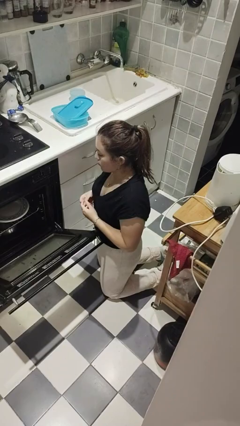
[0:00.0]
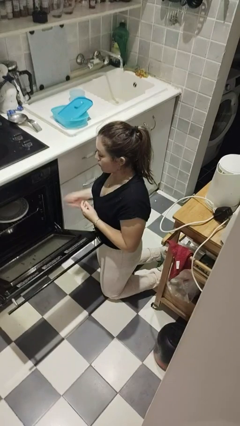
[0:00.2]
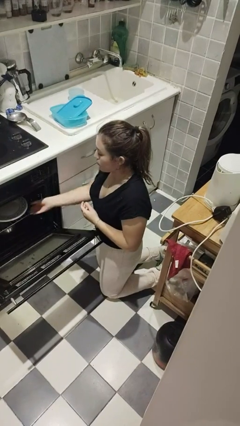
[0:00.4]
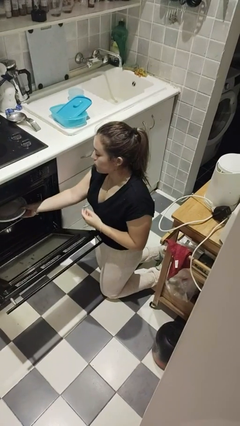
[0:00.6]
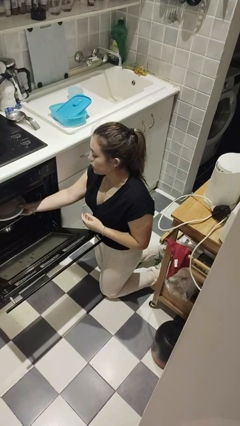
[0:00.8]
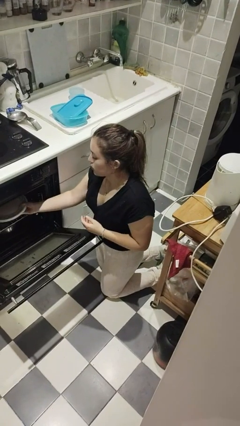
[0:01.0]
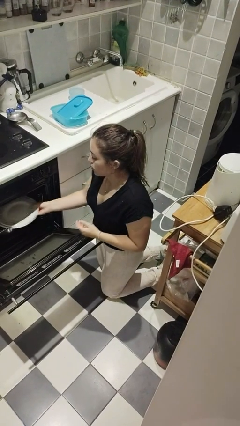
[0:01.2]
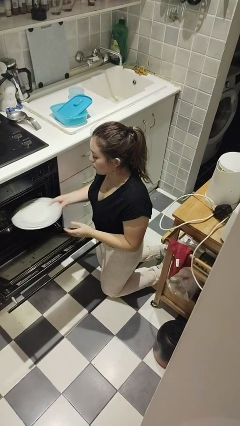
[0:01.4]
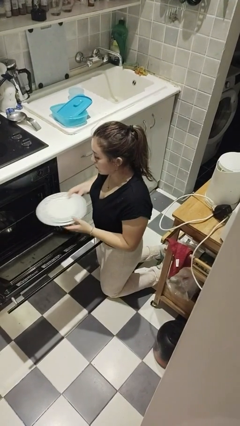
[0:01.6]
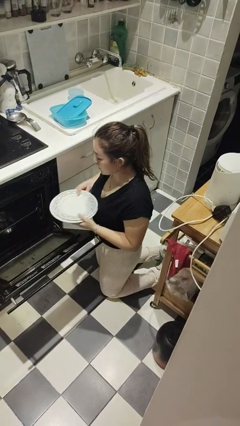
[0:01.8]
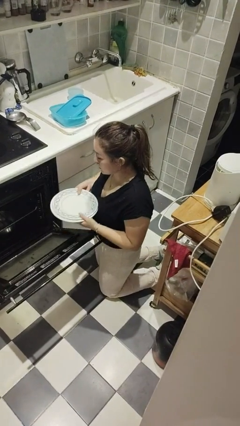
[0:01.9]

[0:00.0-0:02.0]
person unloads dishwasher

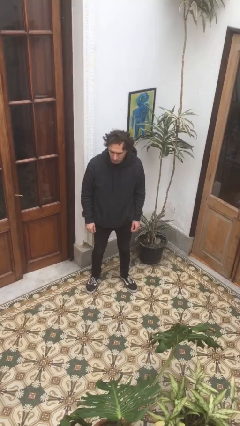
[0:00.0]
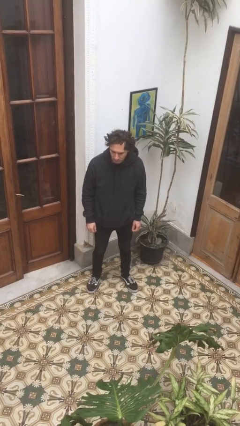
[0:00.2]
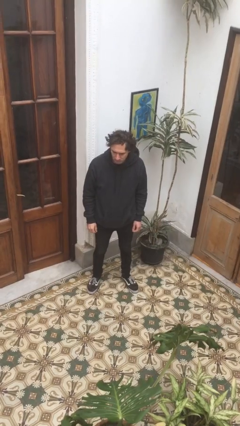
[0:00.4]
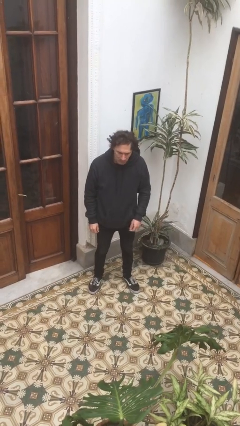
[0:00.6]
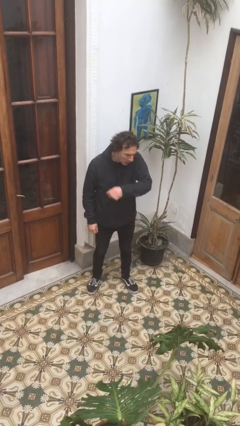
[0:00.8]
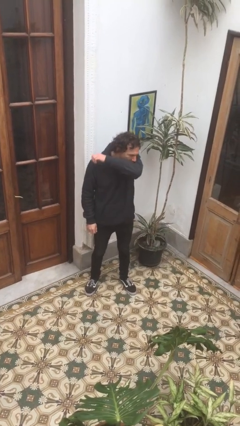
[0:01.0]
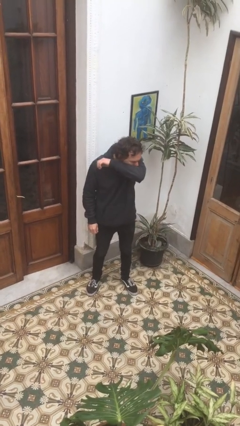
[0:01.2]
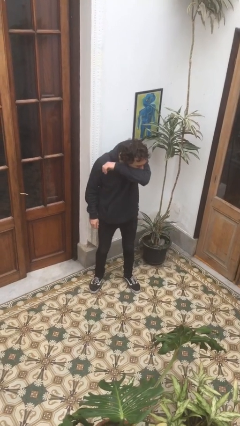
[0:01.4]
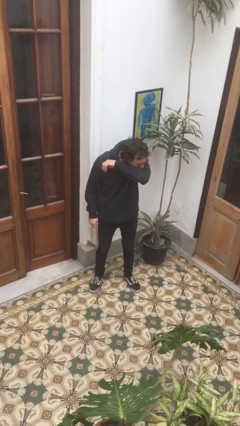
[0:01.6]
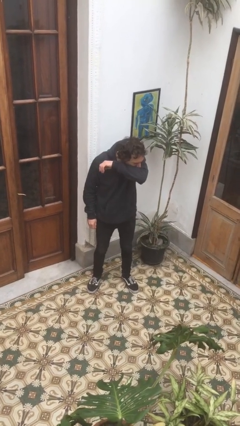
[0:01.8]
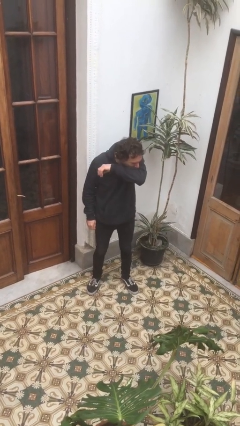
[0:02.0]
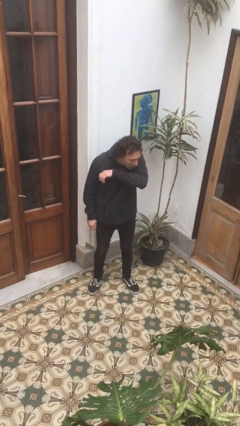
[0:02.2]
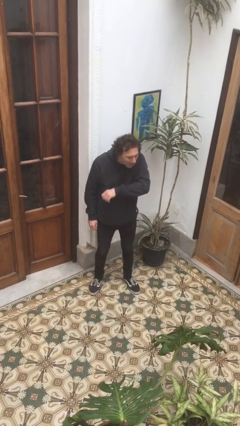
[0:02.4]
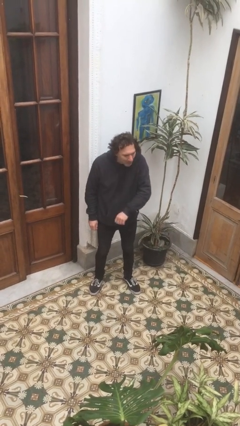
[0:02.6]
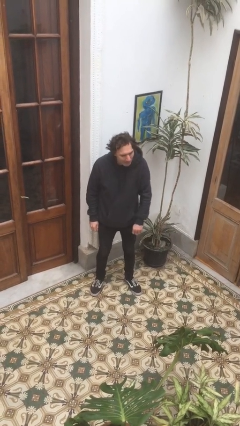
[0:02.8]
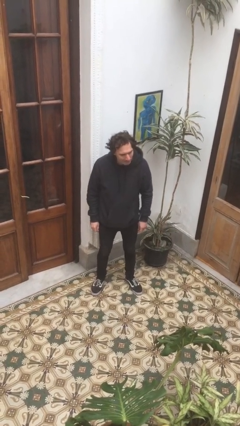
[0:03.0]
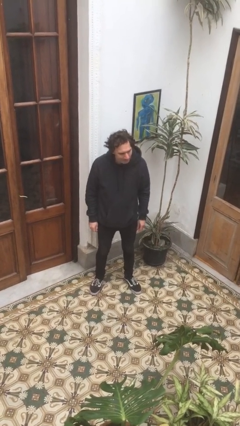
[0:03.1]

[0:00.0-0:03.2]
person sneezes into arm

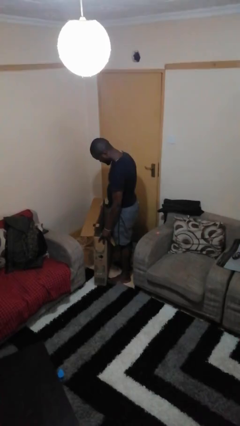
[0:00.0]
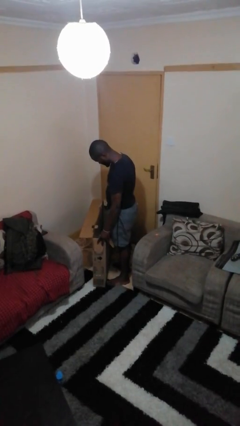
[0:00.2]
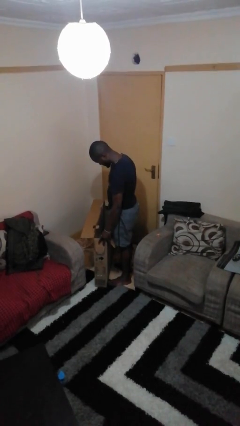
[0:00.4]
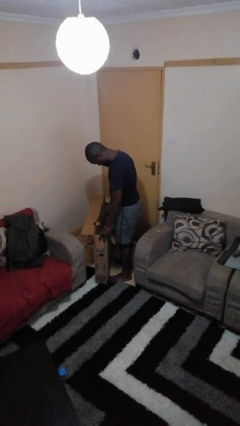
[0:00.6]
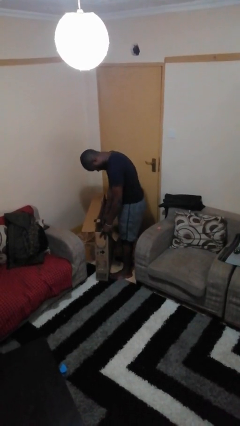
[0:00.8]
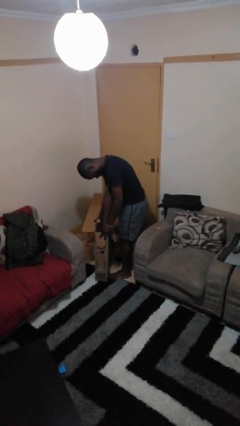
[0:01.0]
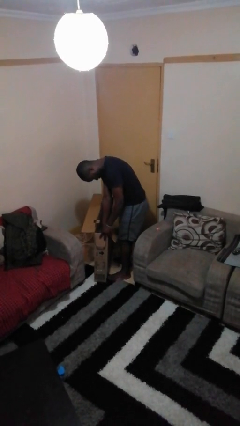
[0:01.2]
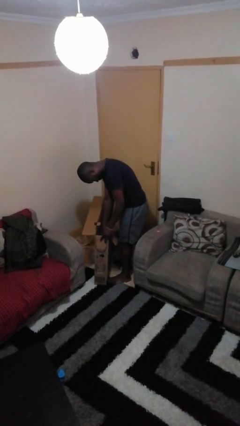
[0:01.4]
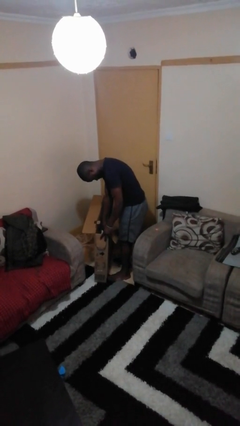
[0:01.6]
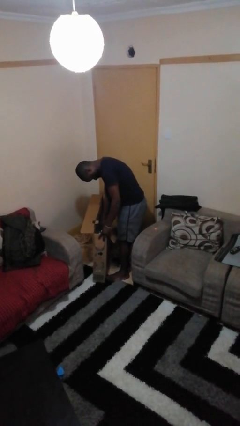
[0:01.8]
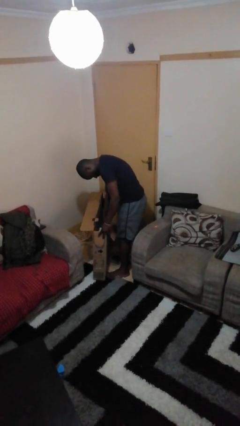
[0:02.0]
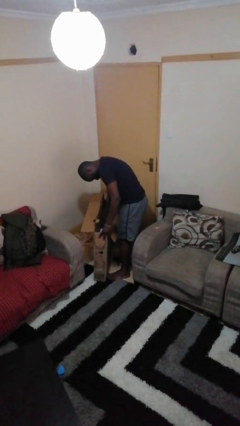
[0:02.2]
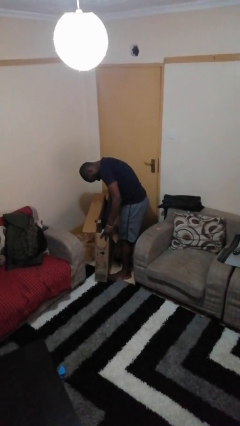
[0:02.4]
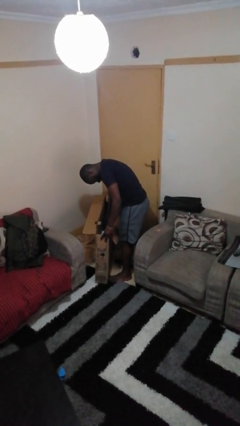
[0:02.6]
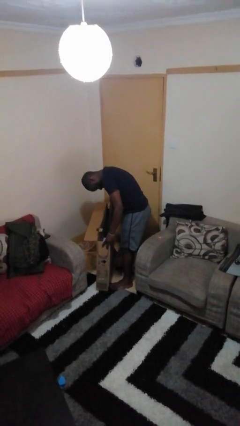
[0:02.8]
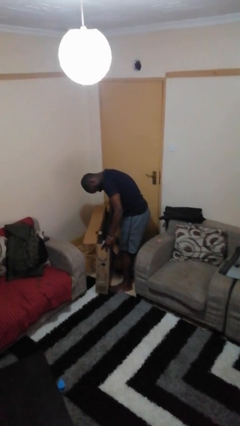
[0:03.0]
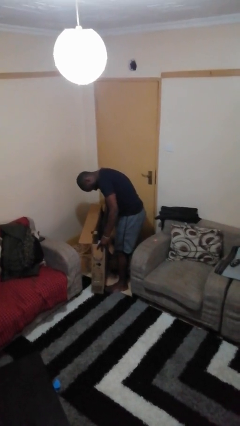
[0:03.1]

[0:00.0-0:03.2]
person searches in box

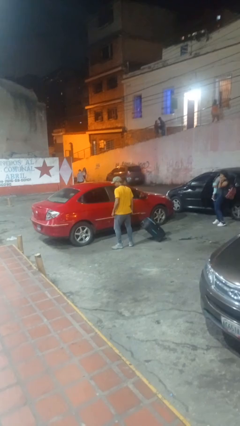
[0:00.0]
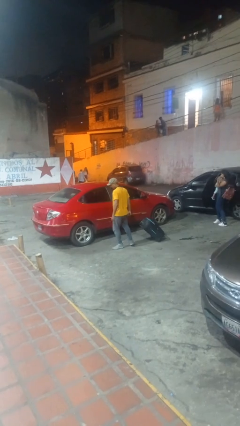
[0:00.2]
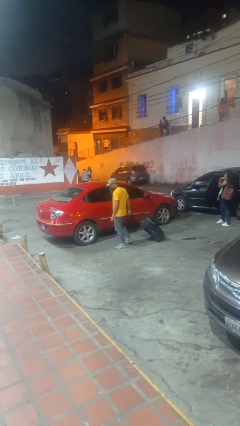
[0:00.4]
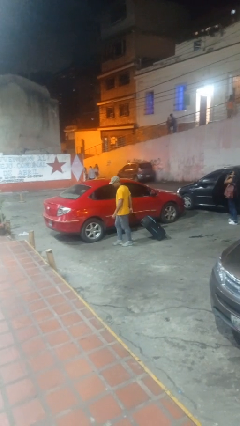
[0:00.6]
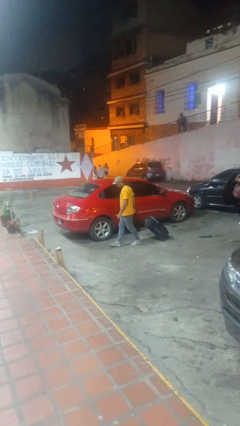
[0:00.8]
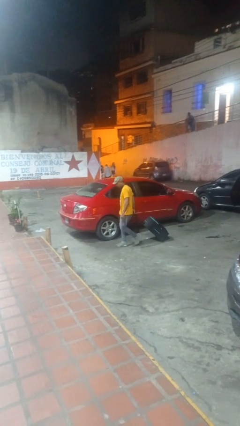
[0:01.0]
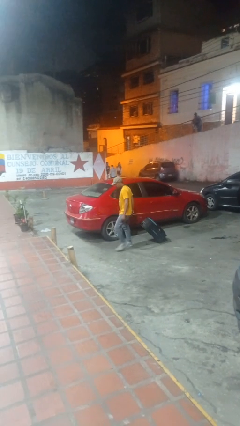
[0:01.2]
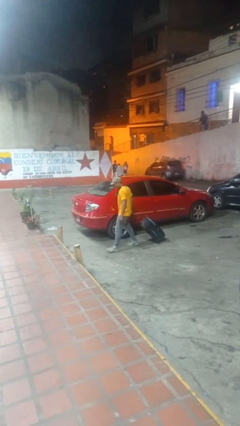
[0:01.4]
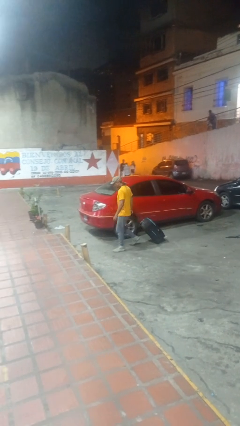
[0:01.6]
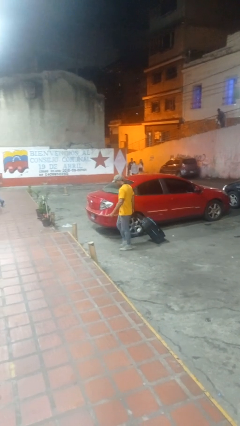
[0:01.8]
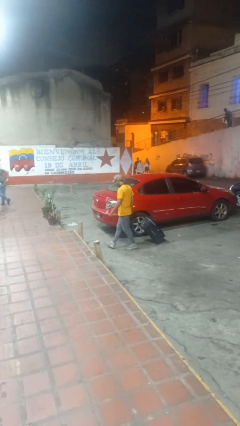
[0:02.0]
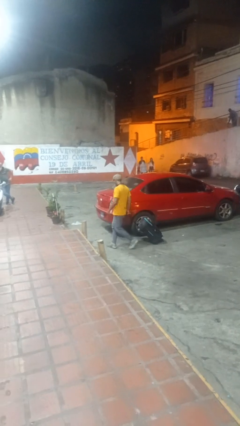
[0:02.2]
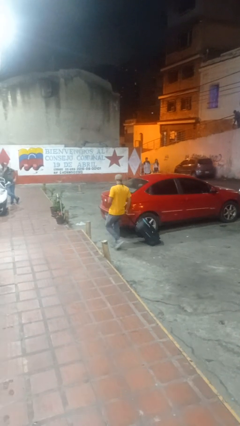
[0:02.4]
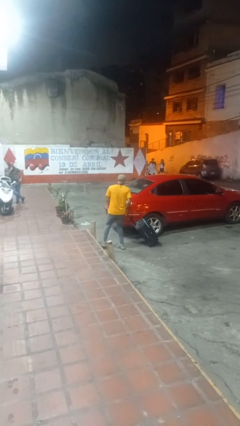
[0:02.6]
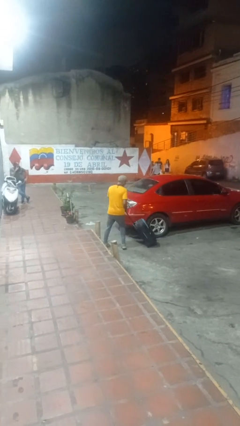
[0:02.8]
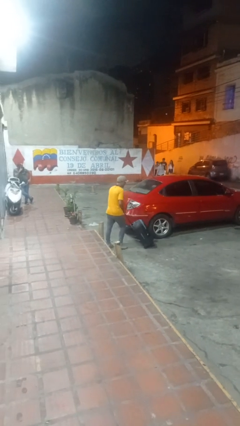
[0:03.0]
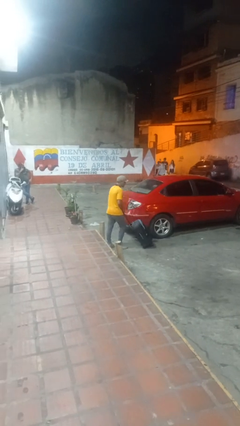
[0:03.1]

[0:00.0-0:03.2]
person pulls wheeled cart

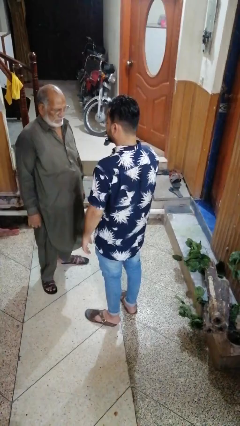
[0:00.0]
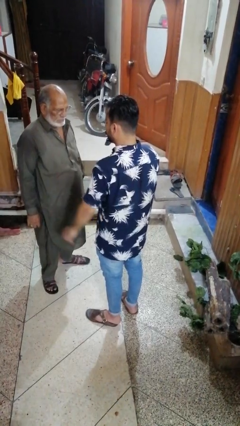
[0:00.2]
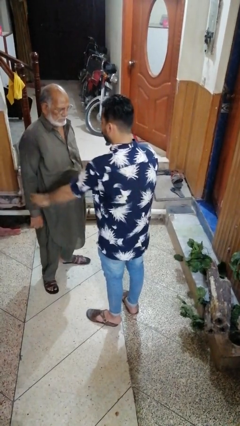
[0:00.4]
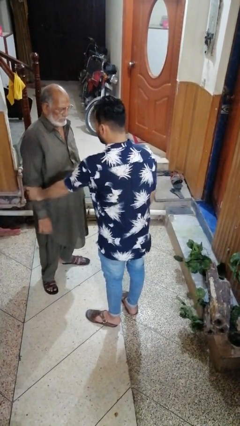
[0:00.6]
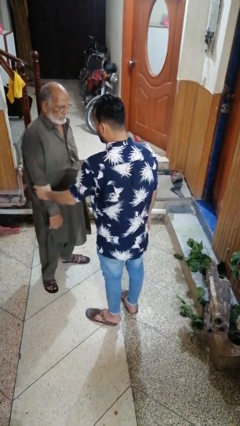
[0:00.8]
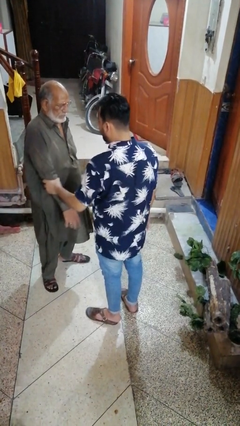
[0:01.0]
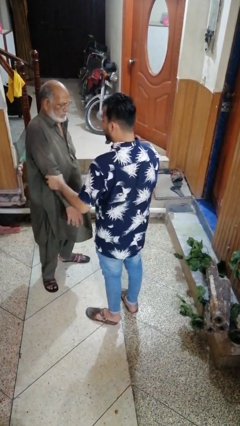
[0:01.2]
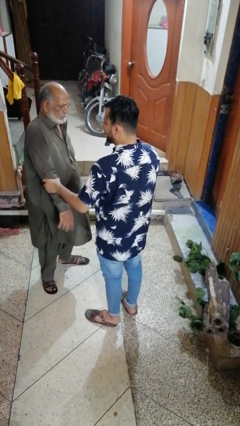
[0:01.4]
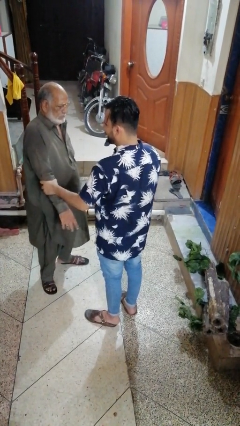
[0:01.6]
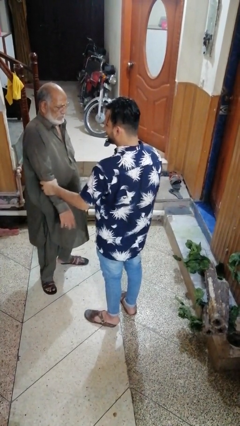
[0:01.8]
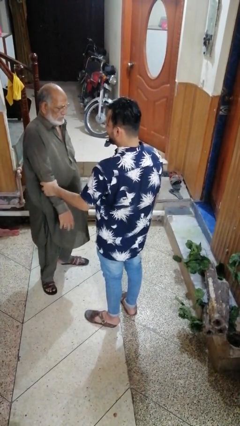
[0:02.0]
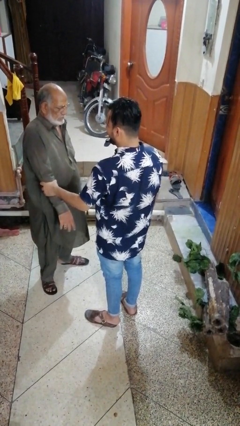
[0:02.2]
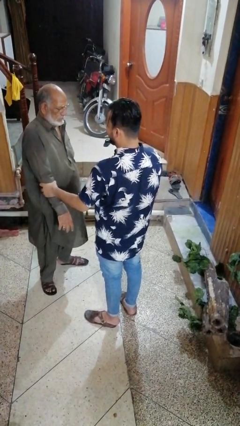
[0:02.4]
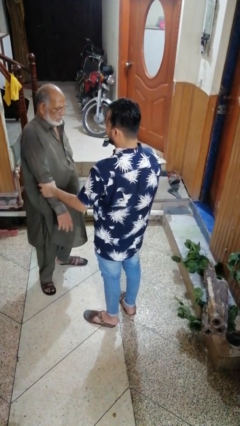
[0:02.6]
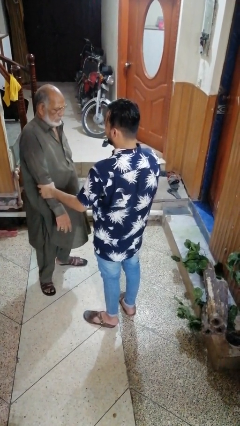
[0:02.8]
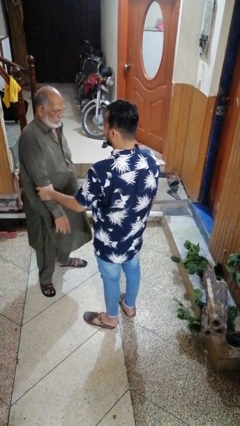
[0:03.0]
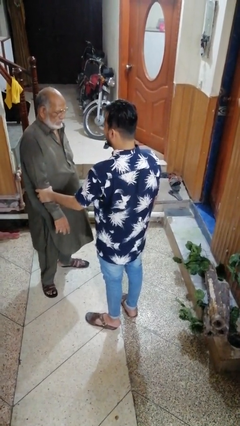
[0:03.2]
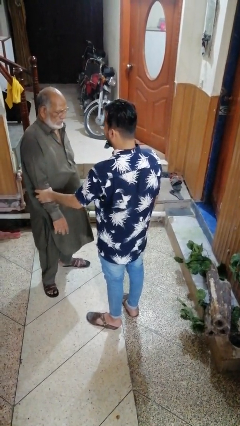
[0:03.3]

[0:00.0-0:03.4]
person grabs person by forearm

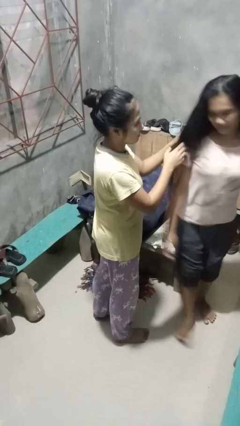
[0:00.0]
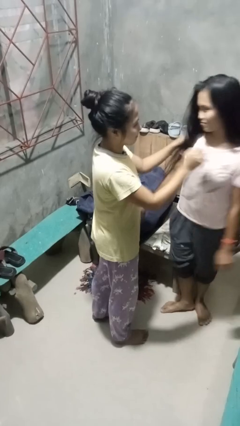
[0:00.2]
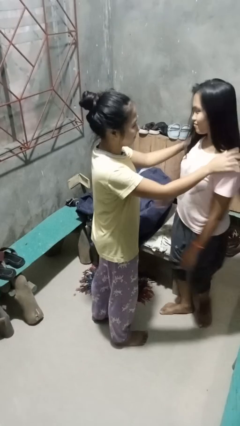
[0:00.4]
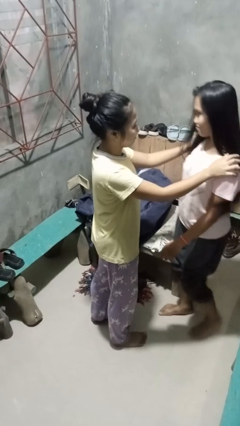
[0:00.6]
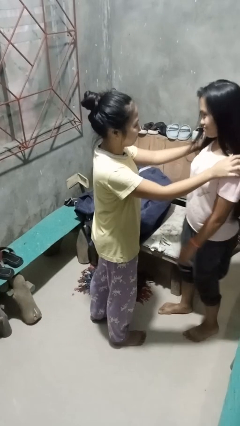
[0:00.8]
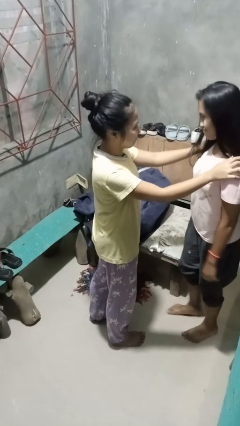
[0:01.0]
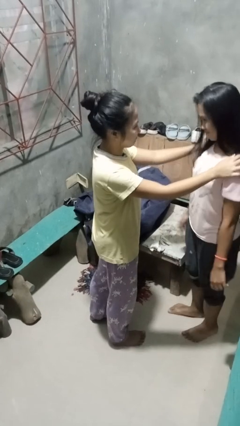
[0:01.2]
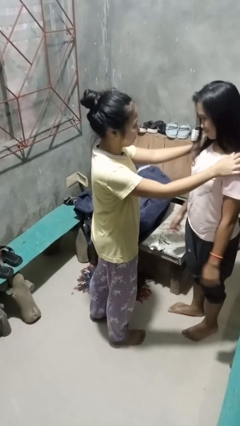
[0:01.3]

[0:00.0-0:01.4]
person spins person around

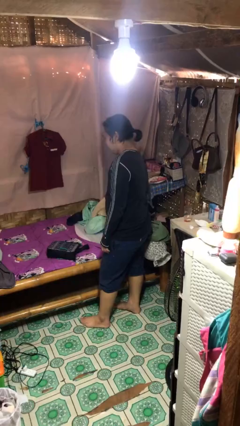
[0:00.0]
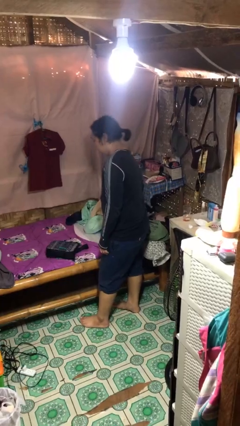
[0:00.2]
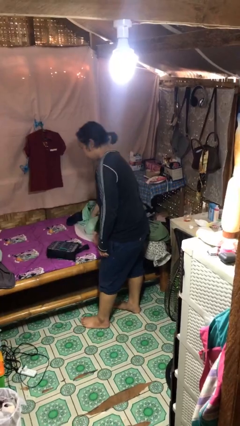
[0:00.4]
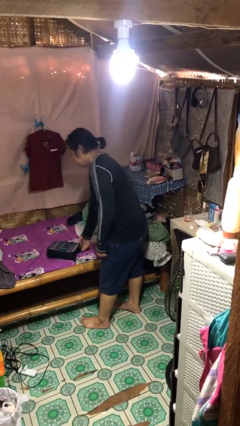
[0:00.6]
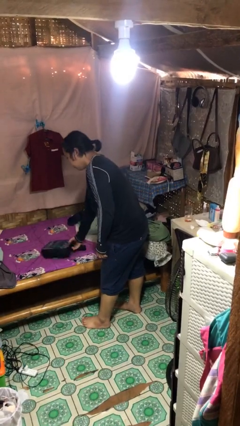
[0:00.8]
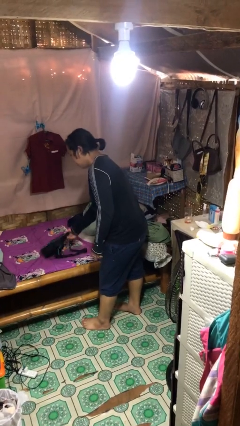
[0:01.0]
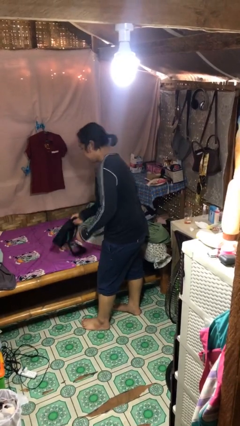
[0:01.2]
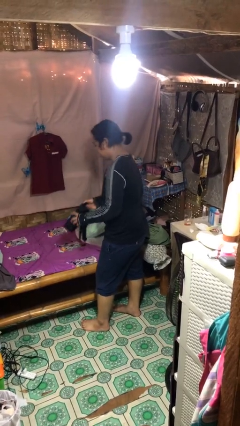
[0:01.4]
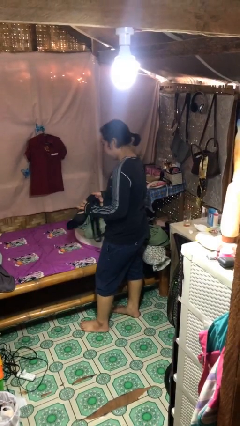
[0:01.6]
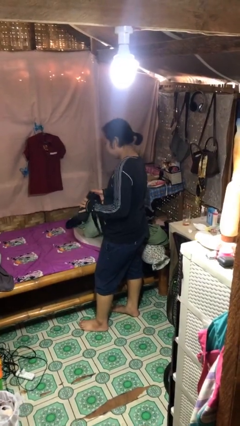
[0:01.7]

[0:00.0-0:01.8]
person picks up object from bed
